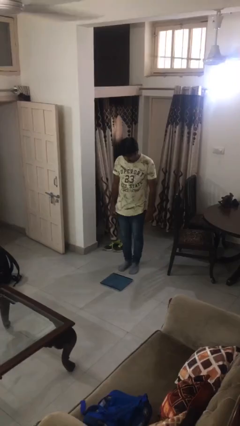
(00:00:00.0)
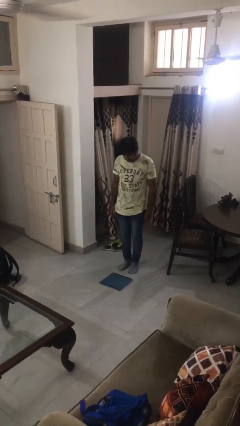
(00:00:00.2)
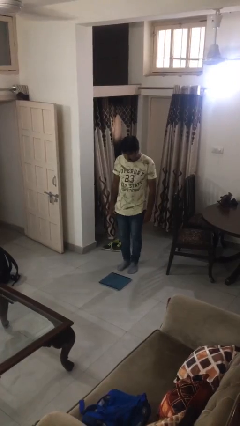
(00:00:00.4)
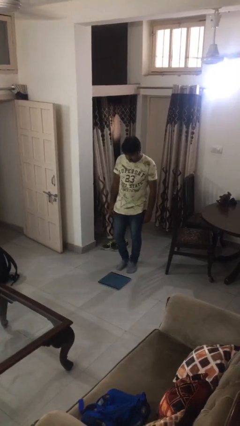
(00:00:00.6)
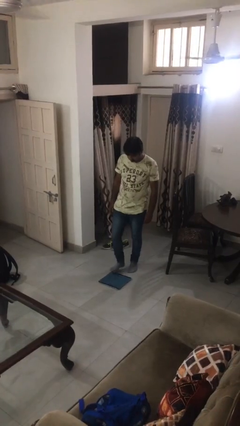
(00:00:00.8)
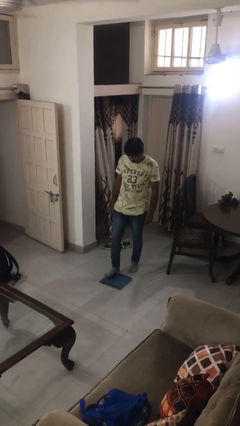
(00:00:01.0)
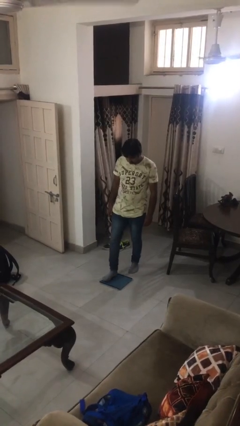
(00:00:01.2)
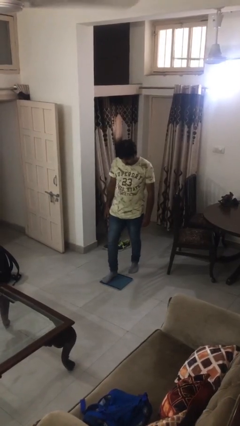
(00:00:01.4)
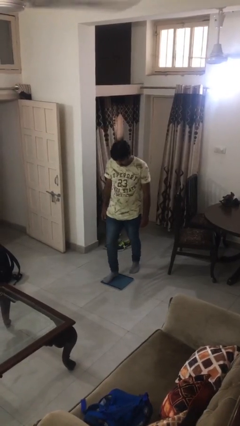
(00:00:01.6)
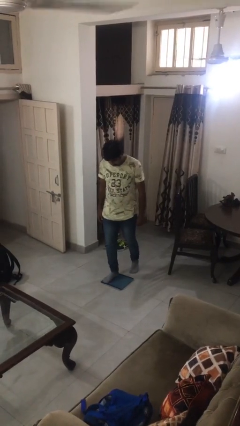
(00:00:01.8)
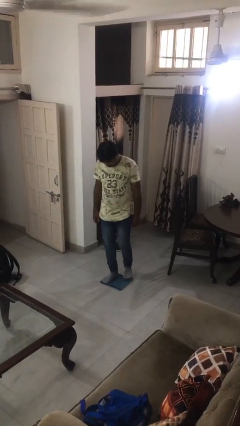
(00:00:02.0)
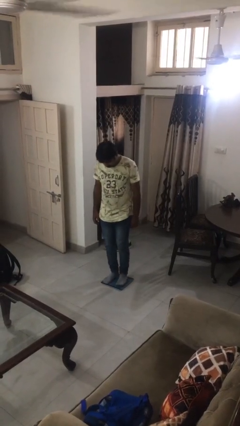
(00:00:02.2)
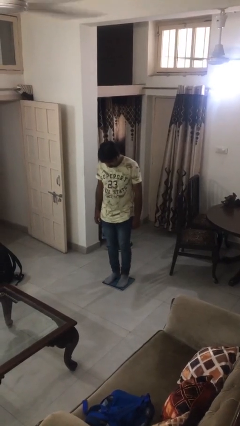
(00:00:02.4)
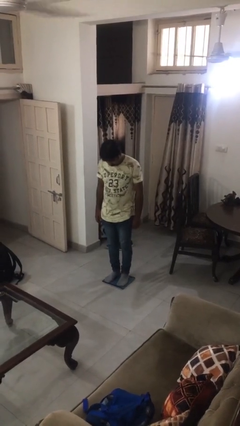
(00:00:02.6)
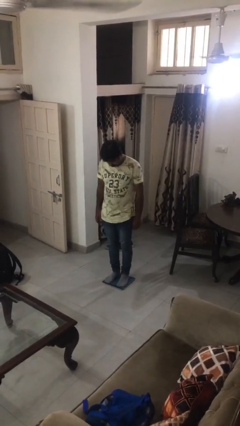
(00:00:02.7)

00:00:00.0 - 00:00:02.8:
person uses bodyweight scale

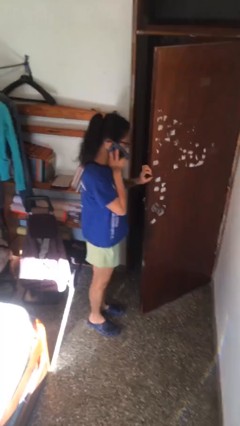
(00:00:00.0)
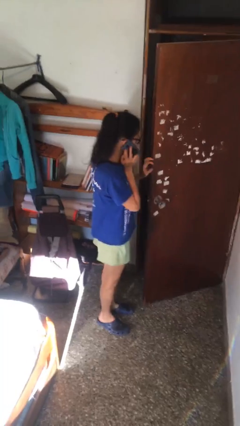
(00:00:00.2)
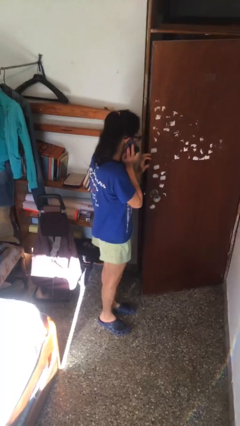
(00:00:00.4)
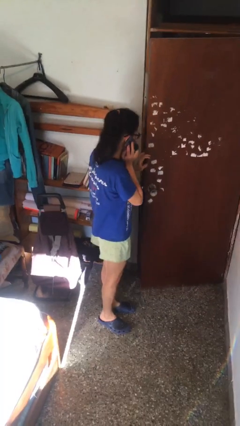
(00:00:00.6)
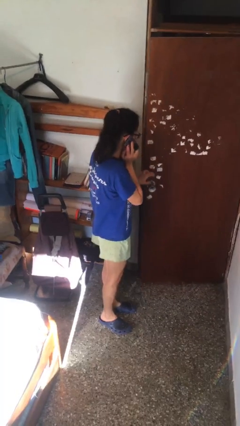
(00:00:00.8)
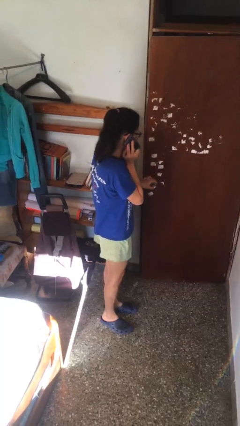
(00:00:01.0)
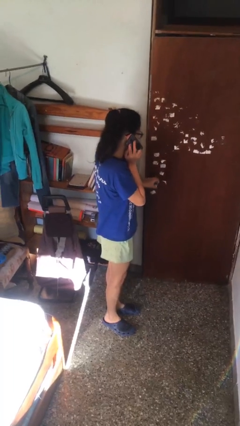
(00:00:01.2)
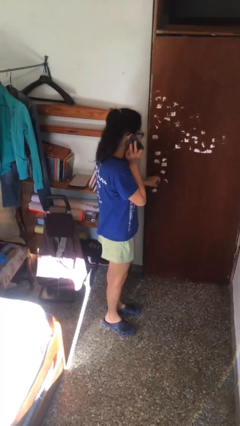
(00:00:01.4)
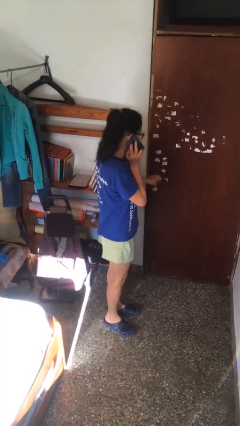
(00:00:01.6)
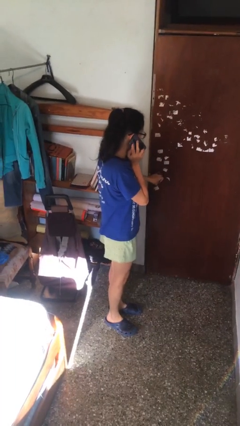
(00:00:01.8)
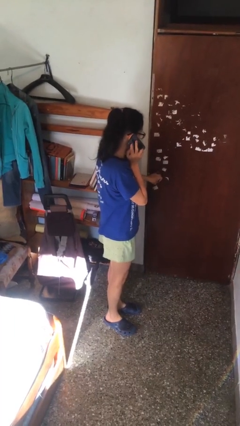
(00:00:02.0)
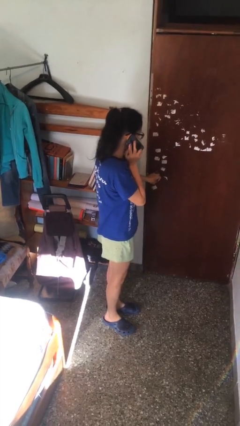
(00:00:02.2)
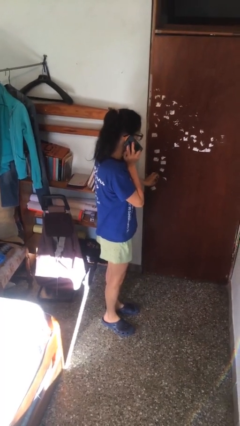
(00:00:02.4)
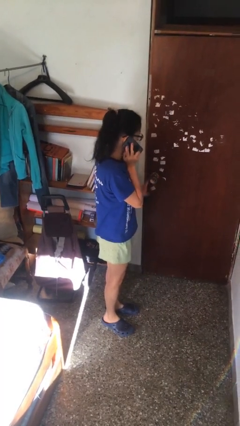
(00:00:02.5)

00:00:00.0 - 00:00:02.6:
person closes facility door

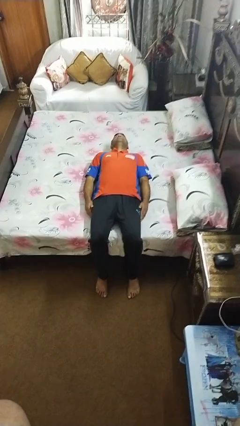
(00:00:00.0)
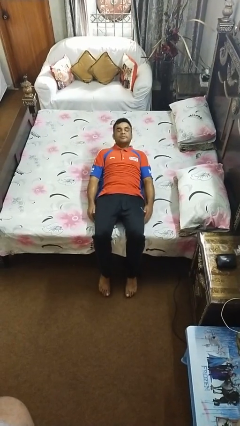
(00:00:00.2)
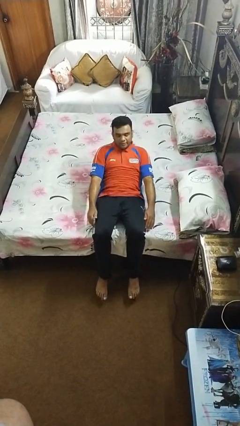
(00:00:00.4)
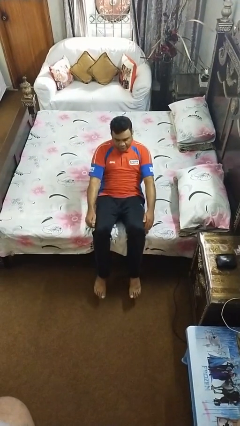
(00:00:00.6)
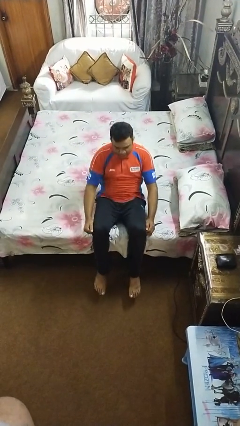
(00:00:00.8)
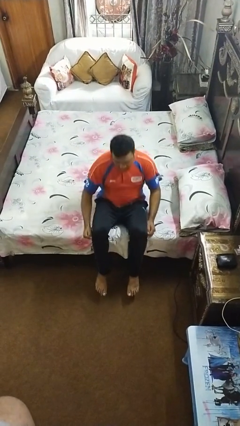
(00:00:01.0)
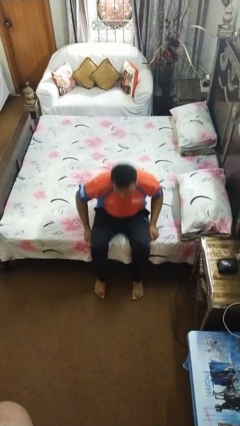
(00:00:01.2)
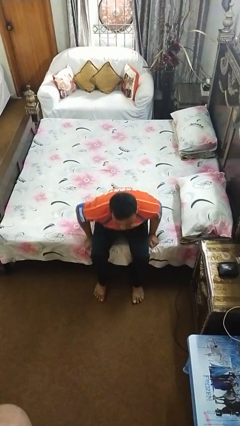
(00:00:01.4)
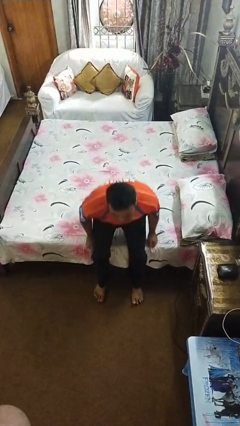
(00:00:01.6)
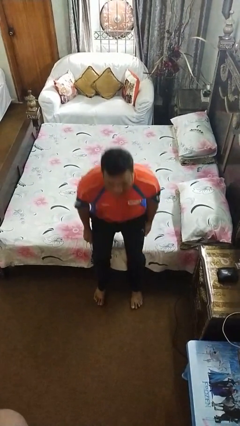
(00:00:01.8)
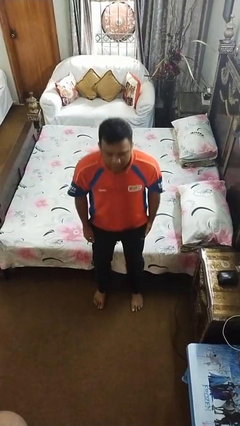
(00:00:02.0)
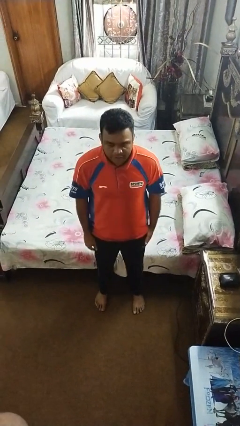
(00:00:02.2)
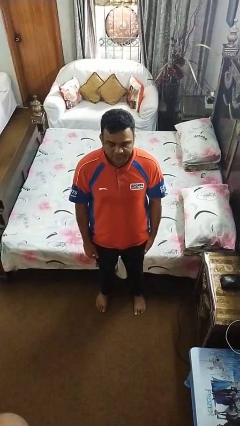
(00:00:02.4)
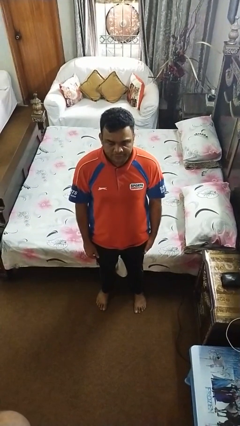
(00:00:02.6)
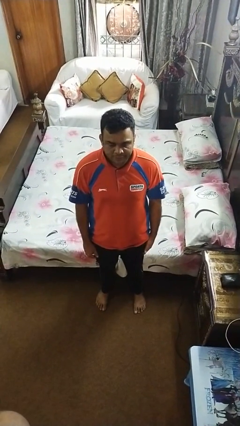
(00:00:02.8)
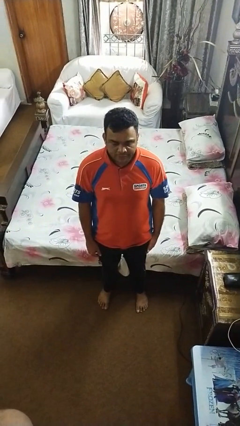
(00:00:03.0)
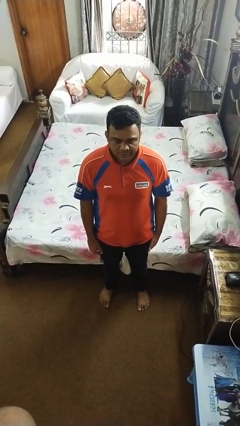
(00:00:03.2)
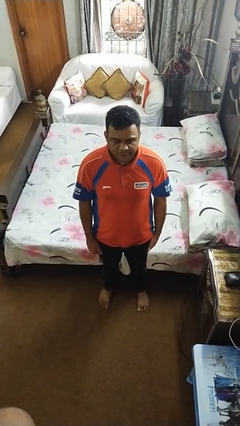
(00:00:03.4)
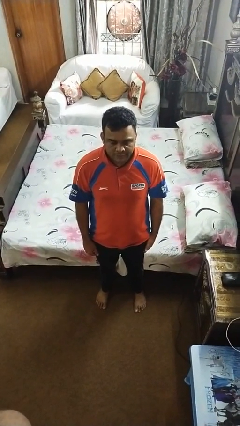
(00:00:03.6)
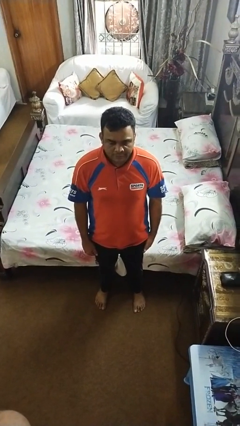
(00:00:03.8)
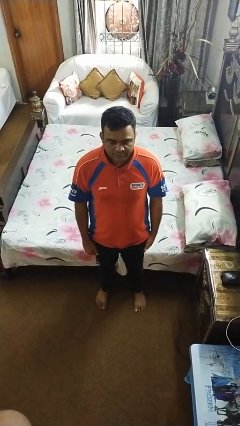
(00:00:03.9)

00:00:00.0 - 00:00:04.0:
person stands up

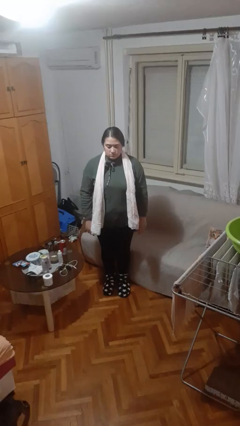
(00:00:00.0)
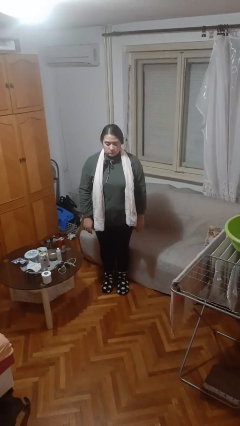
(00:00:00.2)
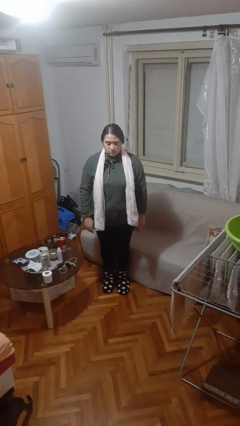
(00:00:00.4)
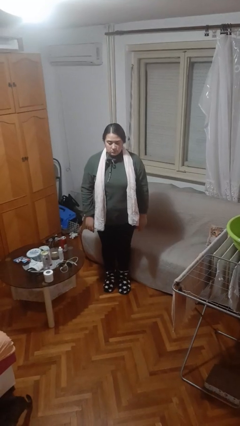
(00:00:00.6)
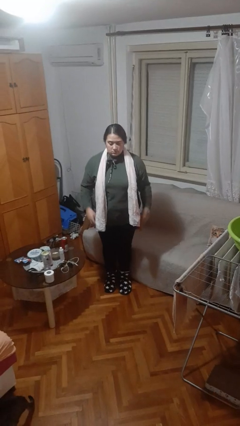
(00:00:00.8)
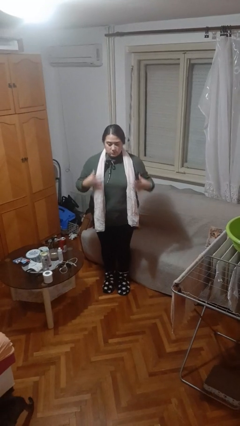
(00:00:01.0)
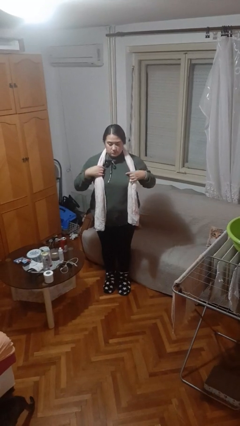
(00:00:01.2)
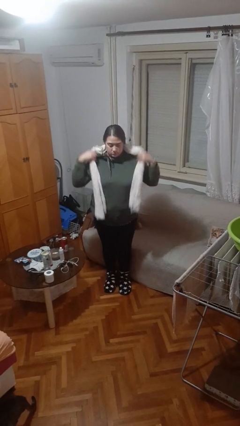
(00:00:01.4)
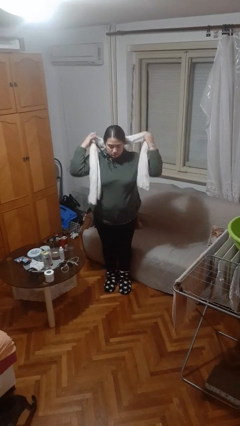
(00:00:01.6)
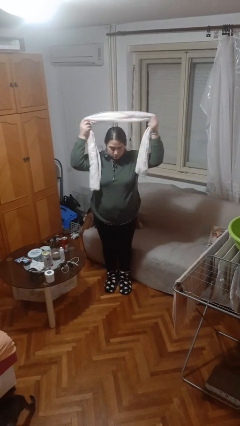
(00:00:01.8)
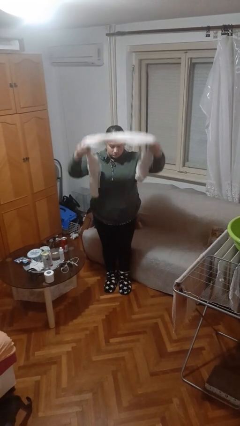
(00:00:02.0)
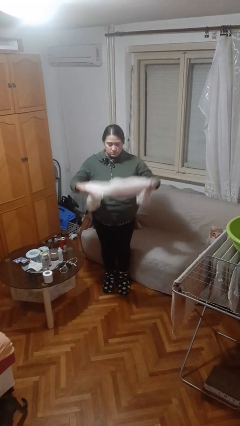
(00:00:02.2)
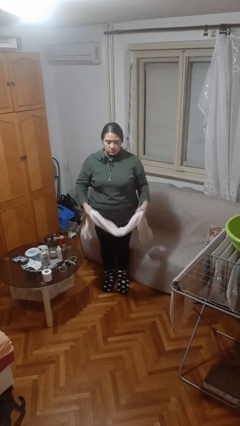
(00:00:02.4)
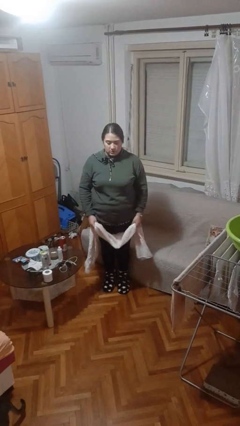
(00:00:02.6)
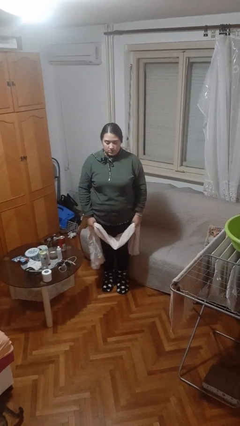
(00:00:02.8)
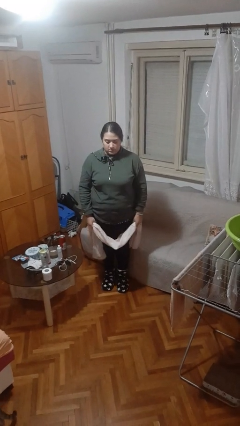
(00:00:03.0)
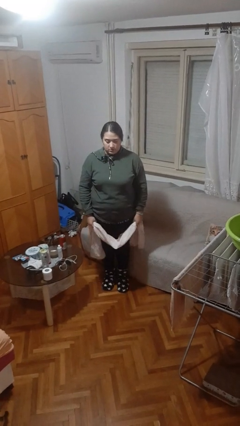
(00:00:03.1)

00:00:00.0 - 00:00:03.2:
person takes off scarf

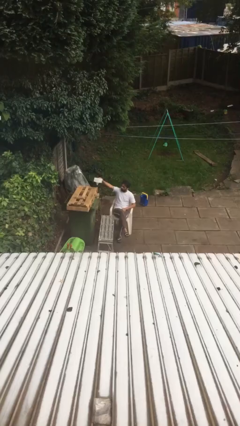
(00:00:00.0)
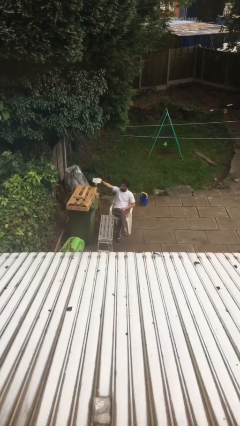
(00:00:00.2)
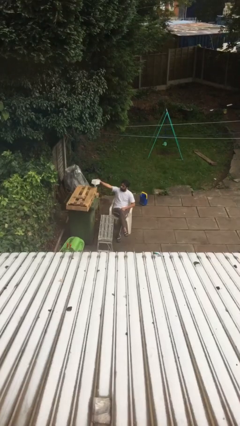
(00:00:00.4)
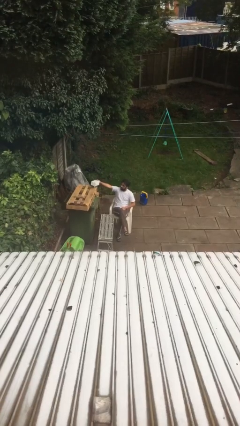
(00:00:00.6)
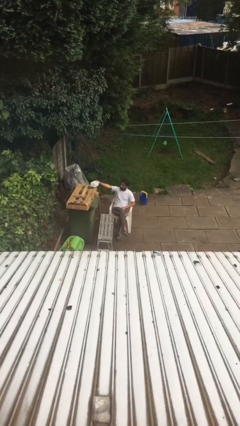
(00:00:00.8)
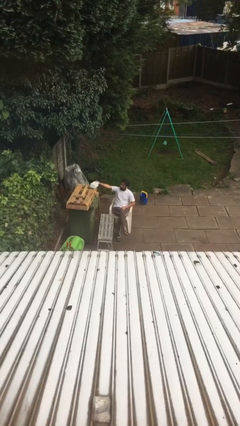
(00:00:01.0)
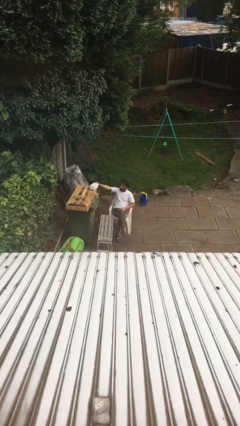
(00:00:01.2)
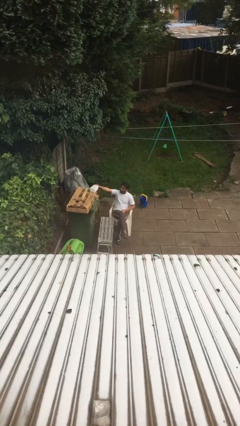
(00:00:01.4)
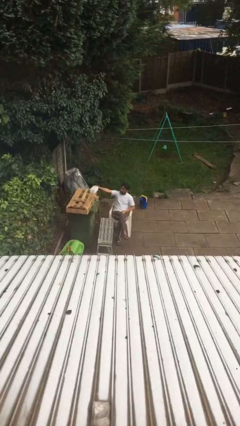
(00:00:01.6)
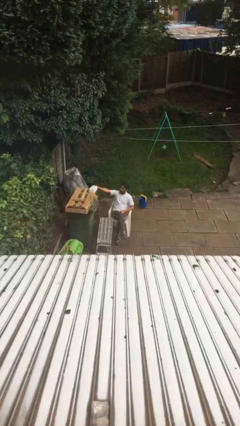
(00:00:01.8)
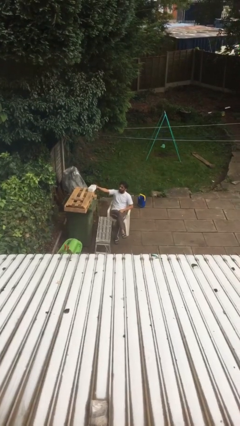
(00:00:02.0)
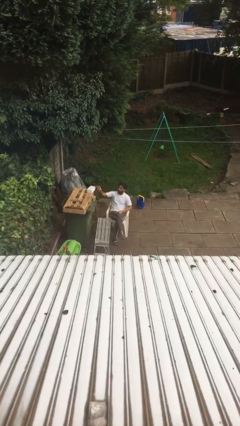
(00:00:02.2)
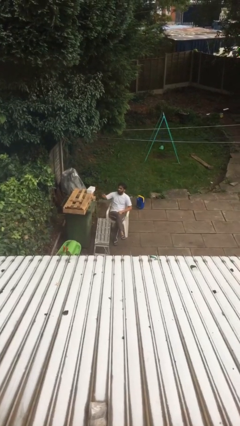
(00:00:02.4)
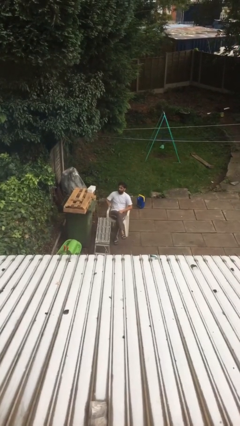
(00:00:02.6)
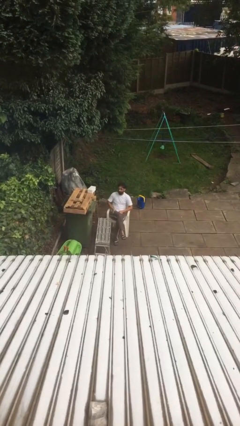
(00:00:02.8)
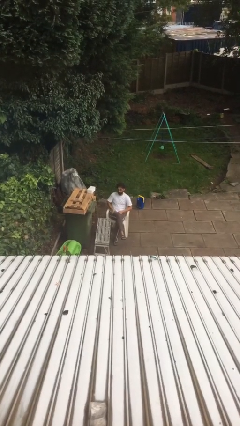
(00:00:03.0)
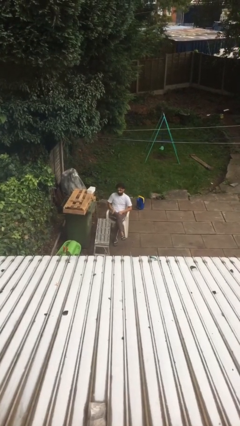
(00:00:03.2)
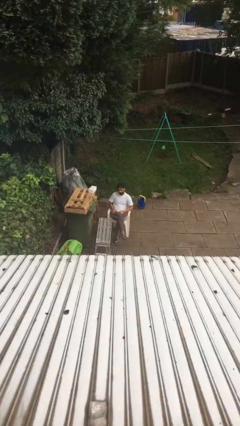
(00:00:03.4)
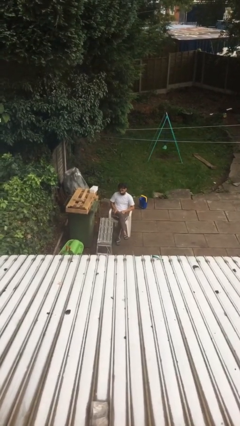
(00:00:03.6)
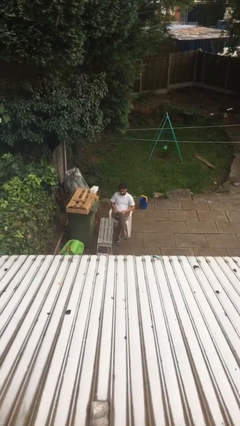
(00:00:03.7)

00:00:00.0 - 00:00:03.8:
person puts down object on shelf

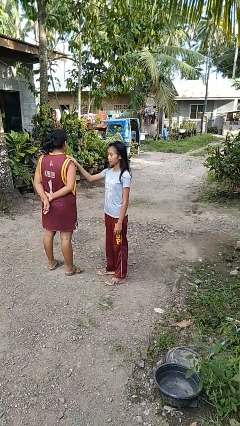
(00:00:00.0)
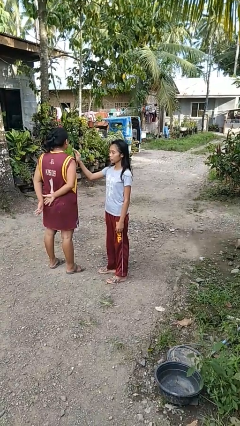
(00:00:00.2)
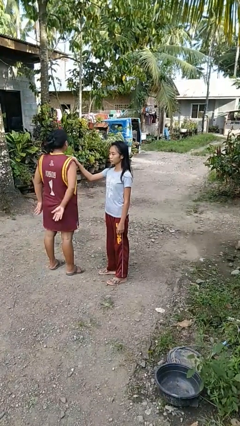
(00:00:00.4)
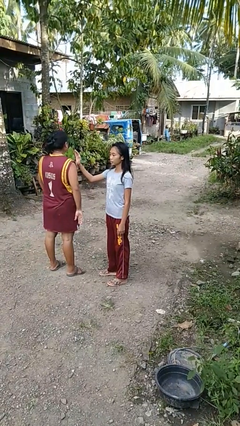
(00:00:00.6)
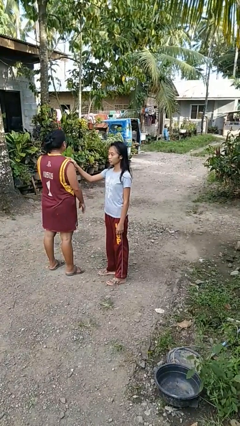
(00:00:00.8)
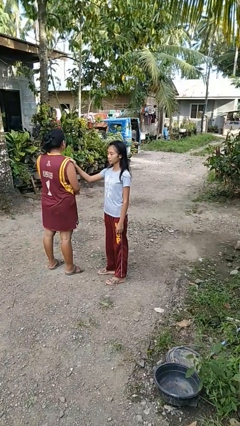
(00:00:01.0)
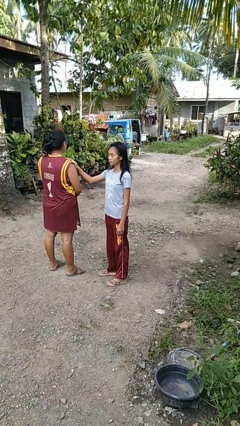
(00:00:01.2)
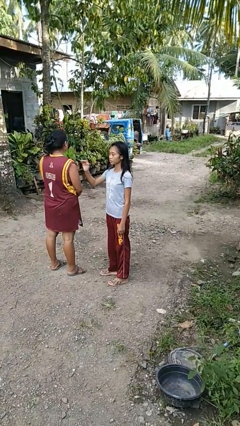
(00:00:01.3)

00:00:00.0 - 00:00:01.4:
person pounds shoulders of person
